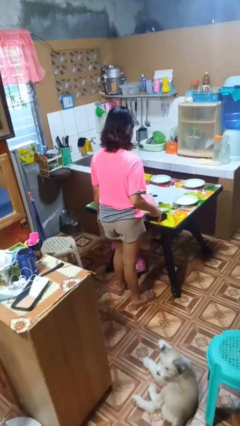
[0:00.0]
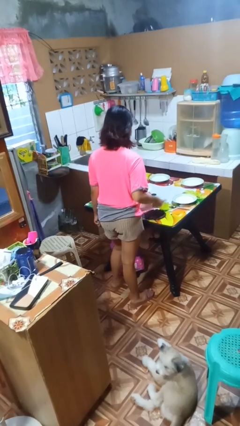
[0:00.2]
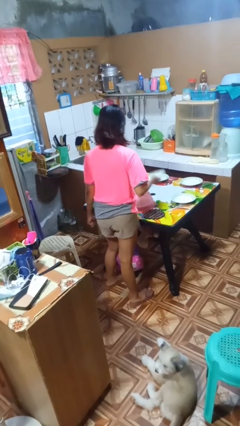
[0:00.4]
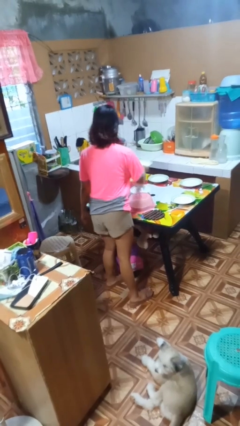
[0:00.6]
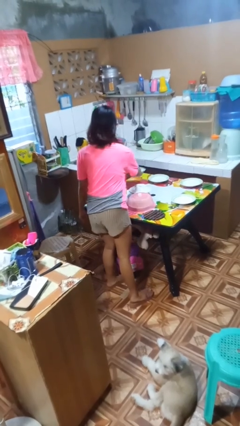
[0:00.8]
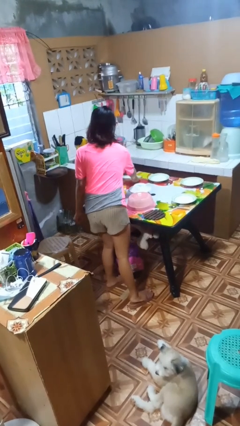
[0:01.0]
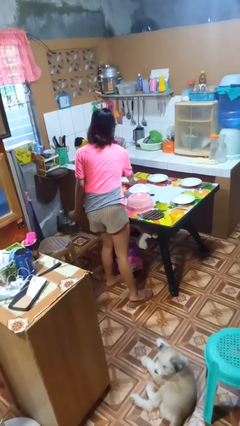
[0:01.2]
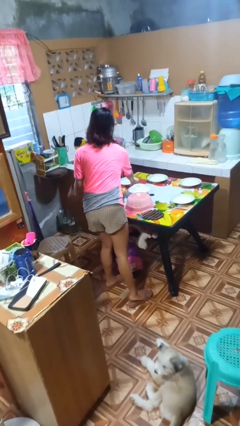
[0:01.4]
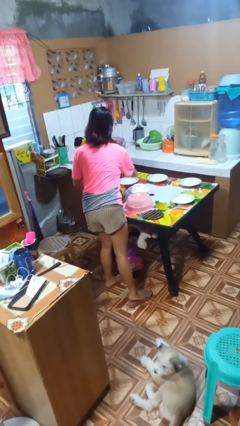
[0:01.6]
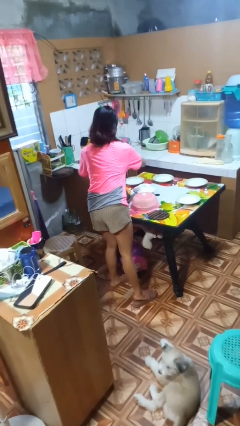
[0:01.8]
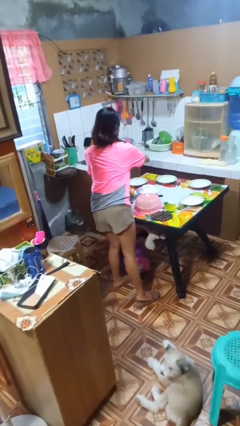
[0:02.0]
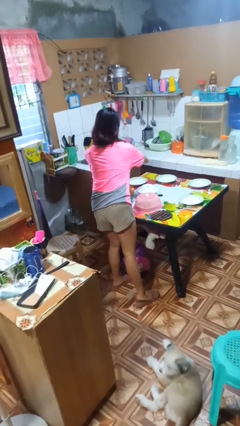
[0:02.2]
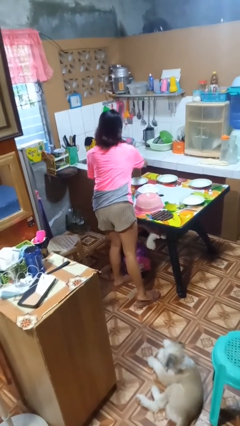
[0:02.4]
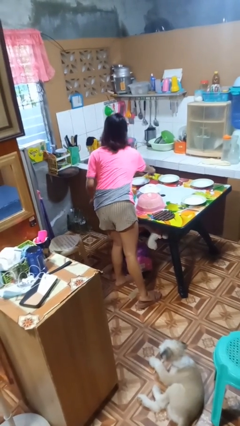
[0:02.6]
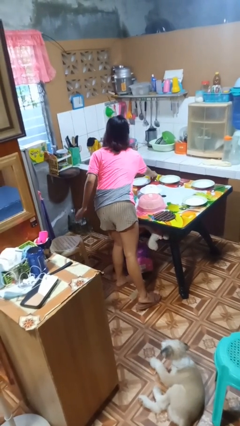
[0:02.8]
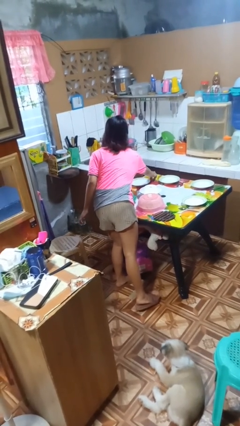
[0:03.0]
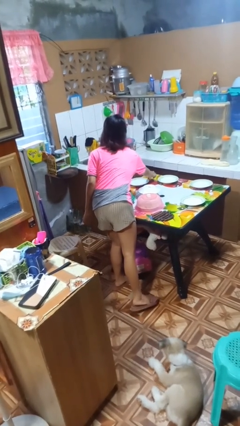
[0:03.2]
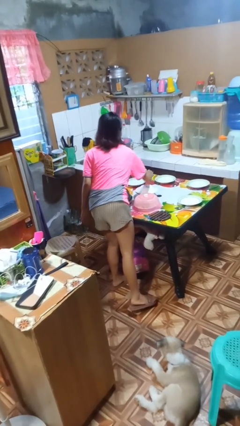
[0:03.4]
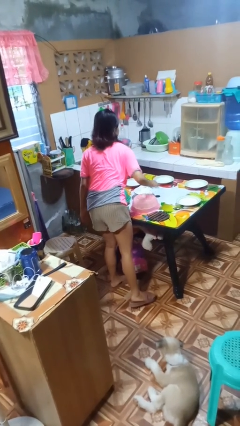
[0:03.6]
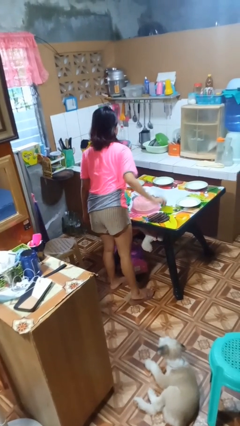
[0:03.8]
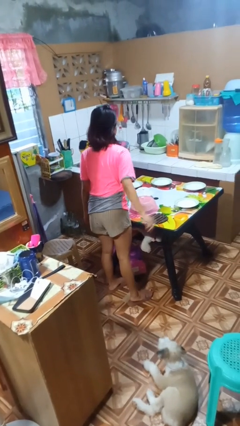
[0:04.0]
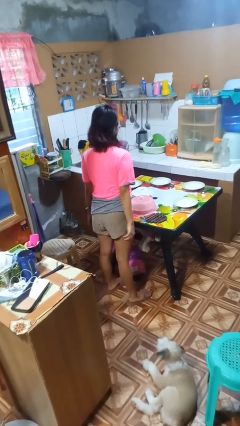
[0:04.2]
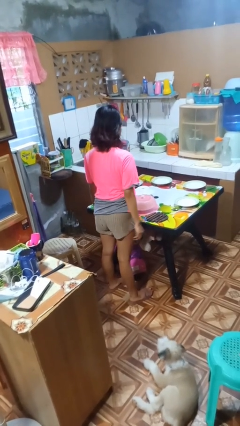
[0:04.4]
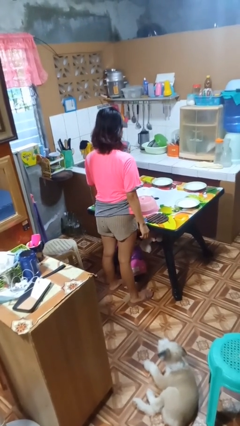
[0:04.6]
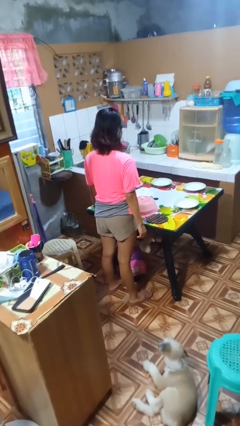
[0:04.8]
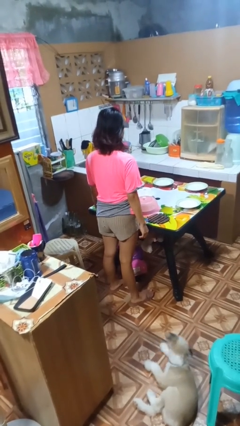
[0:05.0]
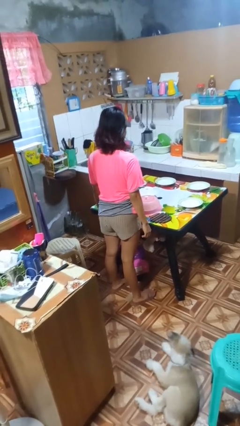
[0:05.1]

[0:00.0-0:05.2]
person sets table

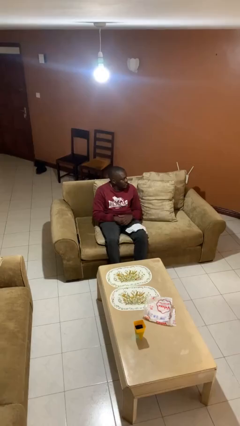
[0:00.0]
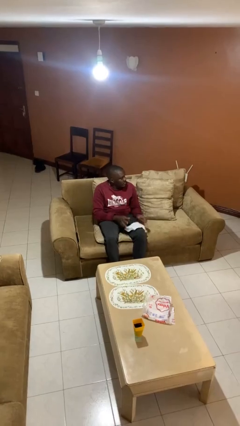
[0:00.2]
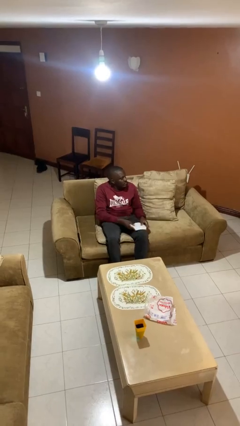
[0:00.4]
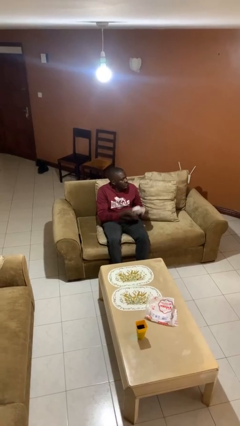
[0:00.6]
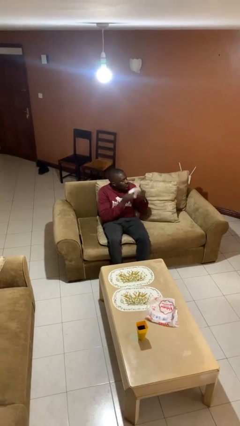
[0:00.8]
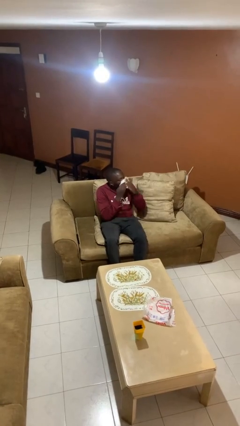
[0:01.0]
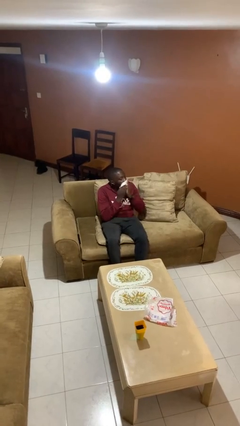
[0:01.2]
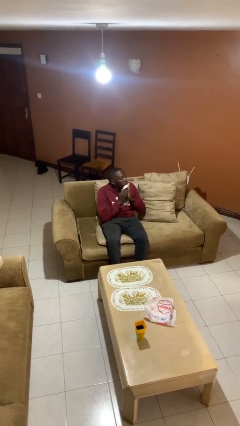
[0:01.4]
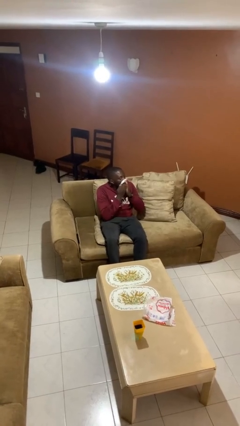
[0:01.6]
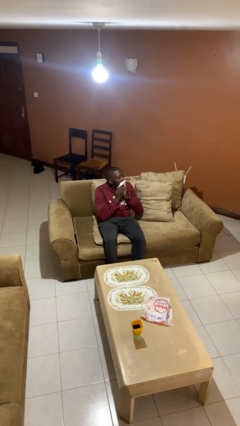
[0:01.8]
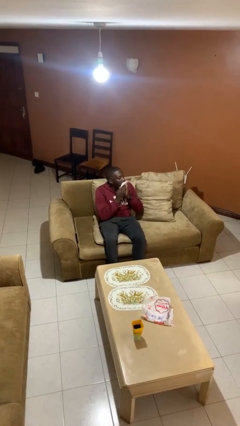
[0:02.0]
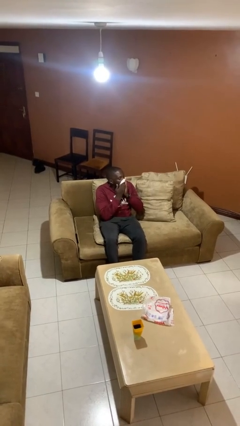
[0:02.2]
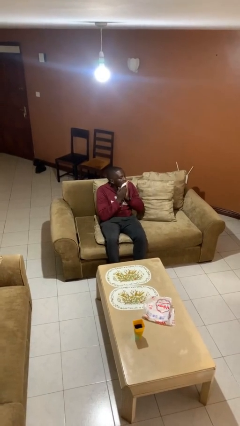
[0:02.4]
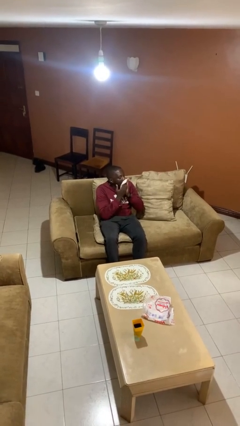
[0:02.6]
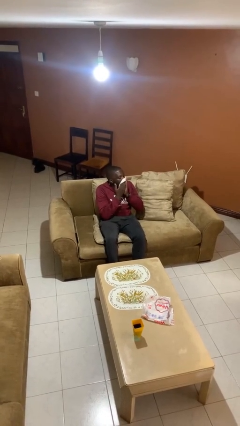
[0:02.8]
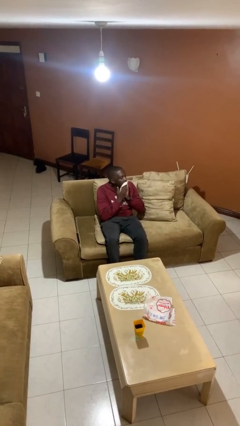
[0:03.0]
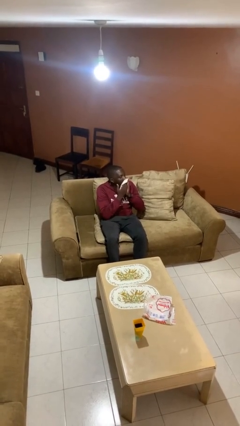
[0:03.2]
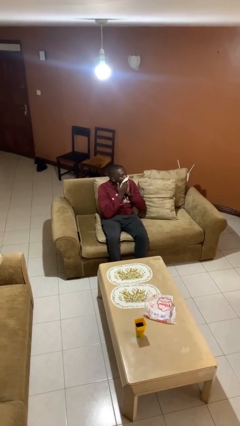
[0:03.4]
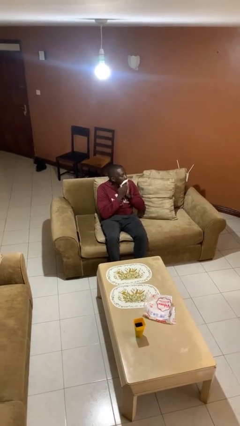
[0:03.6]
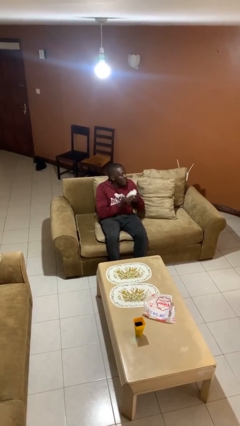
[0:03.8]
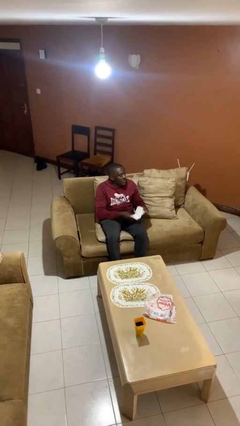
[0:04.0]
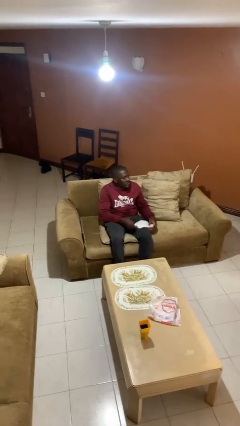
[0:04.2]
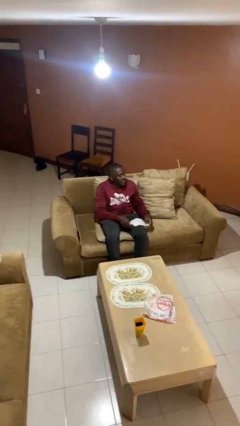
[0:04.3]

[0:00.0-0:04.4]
person wipes mouth with napkin

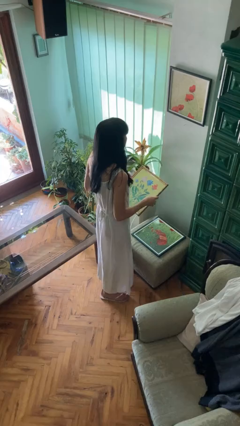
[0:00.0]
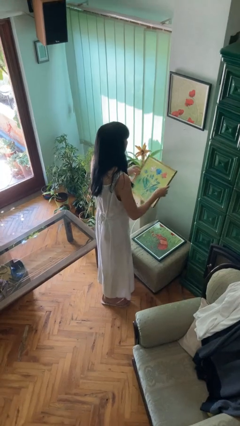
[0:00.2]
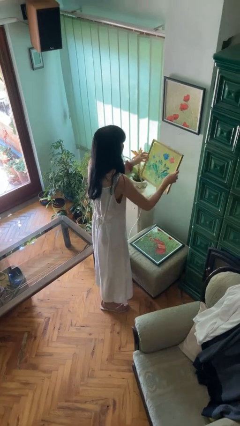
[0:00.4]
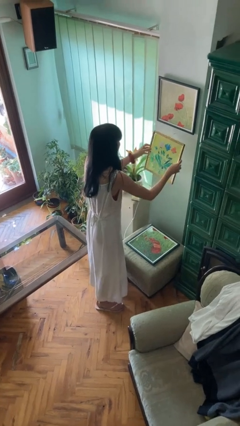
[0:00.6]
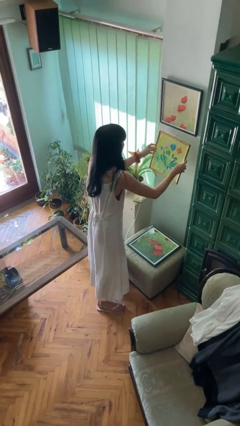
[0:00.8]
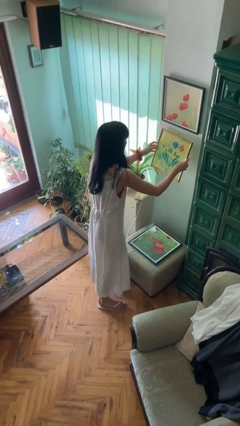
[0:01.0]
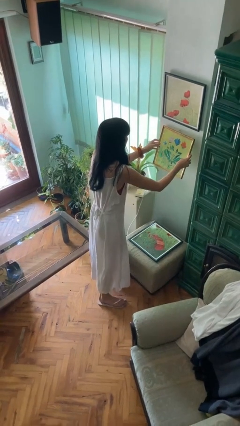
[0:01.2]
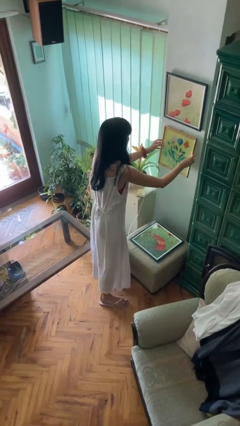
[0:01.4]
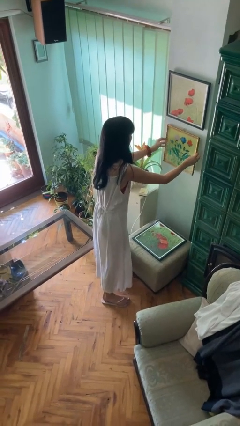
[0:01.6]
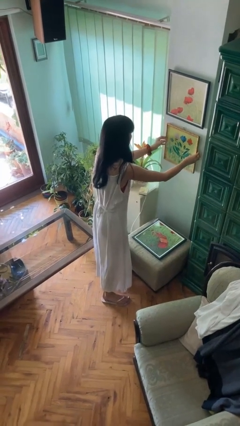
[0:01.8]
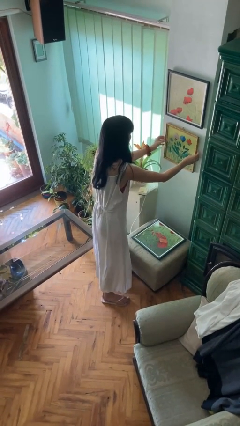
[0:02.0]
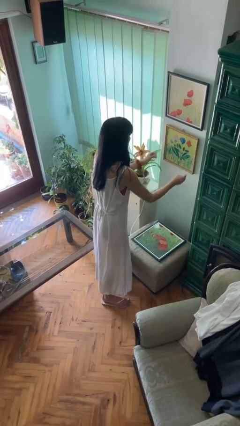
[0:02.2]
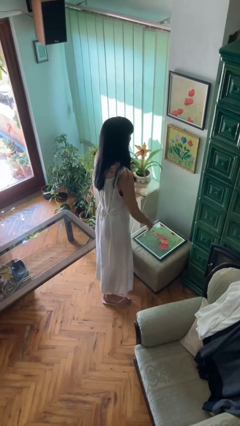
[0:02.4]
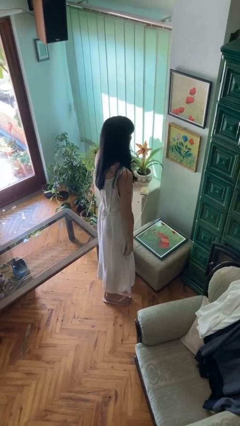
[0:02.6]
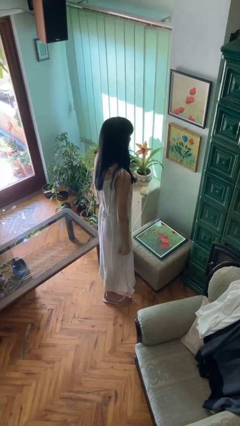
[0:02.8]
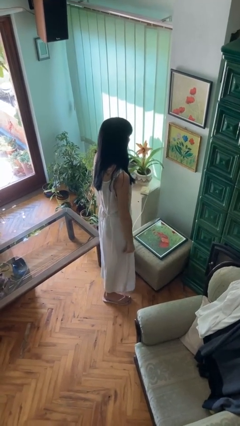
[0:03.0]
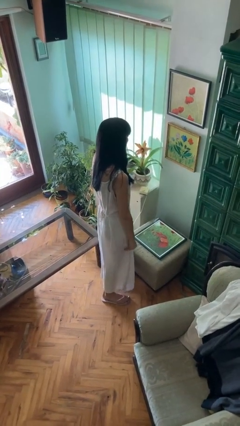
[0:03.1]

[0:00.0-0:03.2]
person puts up picture frame

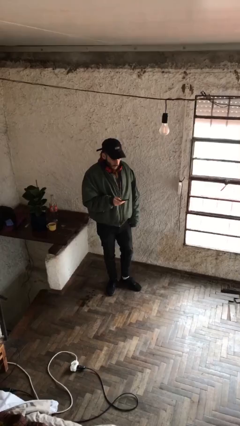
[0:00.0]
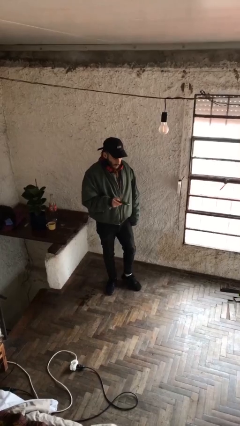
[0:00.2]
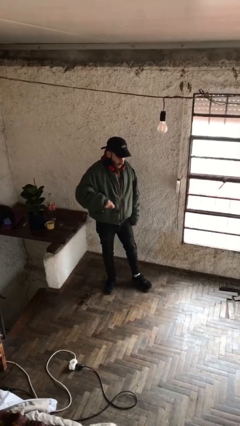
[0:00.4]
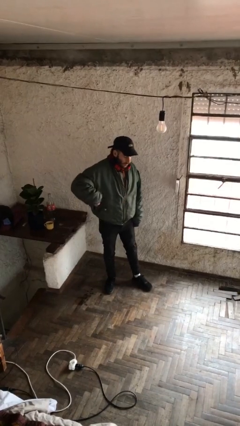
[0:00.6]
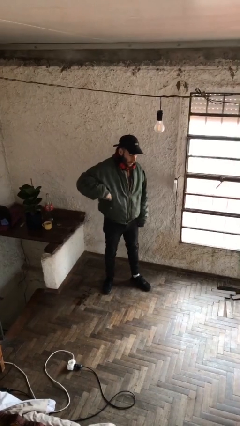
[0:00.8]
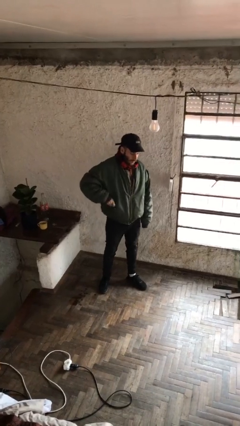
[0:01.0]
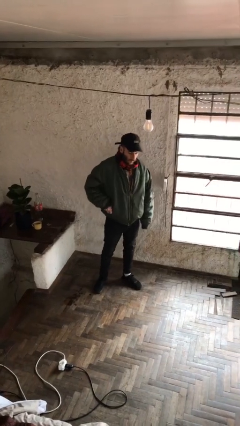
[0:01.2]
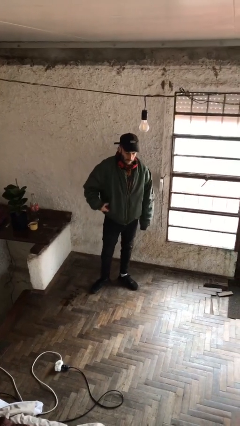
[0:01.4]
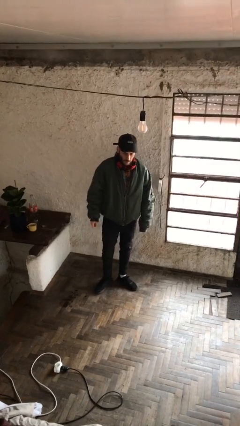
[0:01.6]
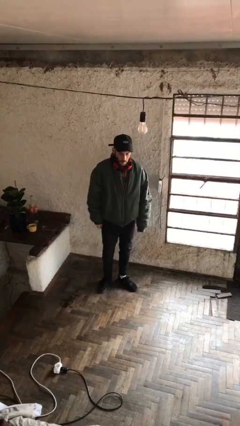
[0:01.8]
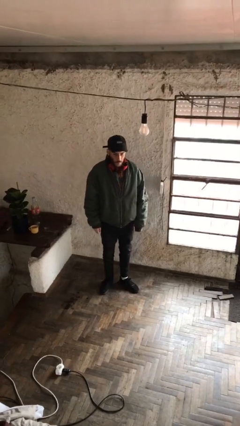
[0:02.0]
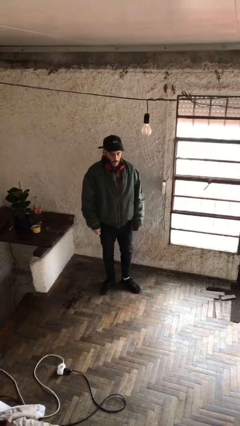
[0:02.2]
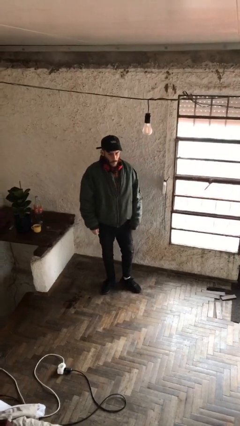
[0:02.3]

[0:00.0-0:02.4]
person puts phone into pocket

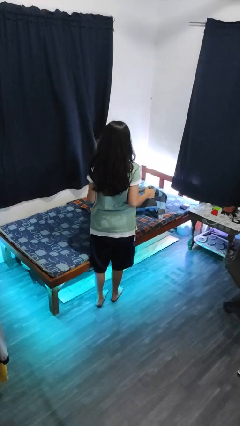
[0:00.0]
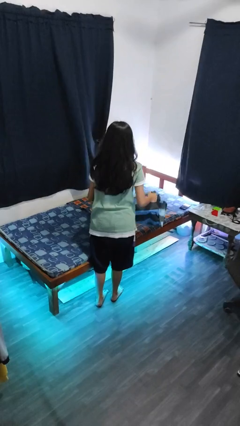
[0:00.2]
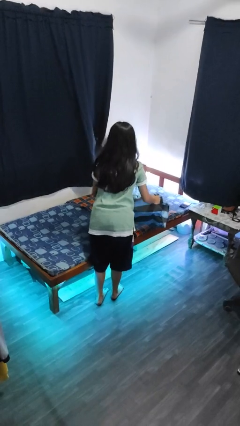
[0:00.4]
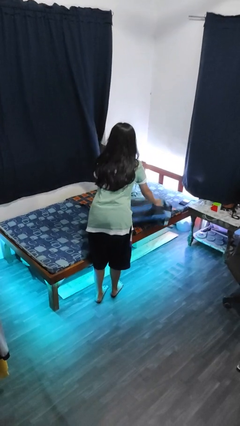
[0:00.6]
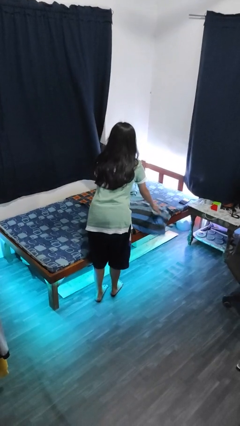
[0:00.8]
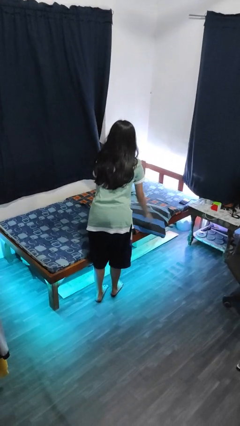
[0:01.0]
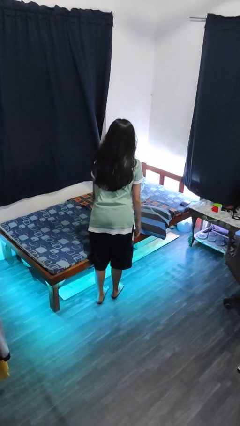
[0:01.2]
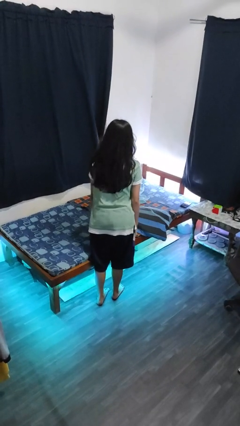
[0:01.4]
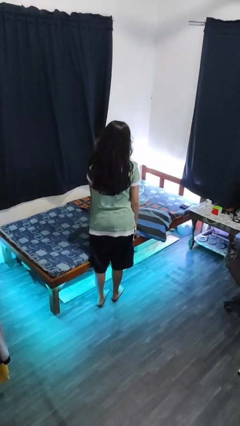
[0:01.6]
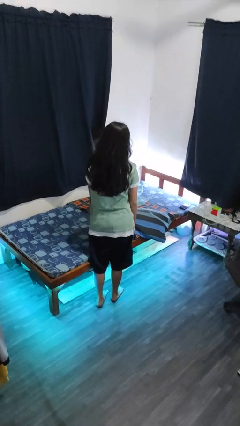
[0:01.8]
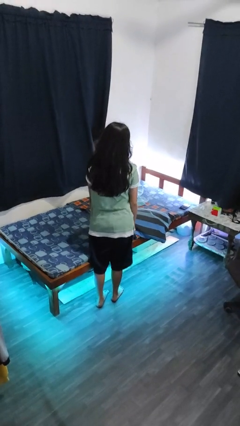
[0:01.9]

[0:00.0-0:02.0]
person puts down object on bed

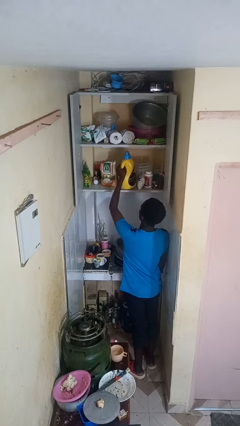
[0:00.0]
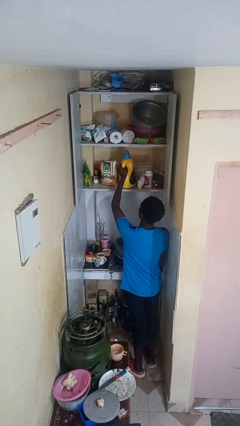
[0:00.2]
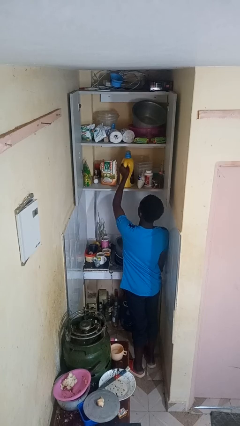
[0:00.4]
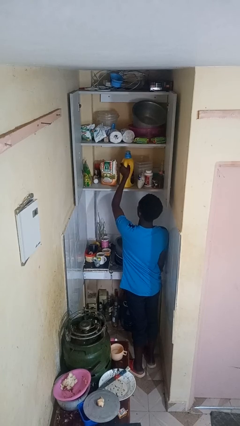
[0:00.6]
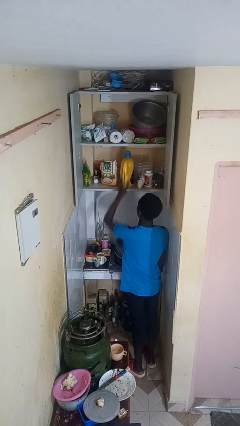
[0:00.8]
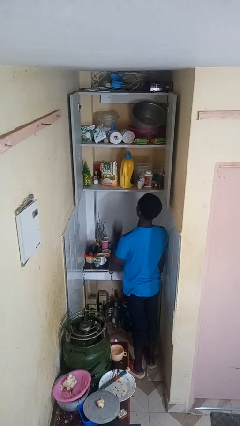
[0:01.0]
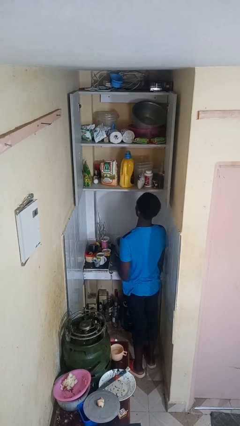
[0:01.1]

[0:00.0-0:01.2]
person puts object in cabinet
